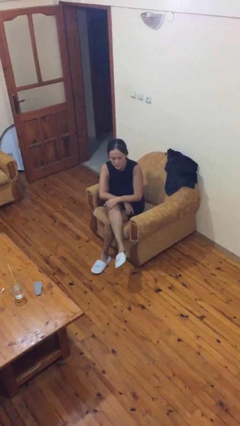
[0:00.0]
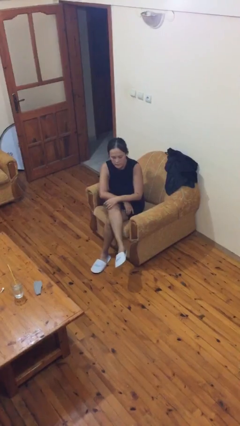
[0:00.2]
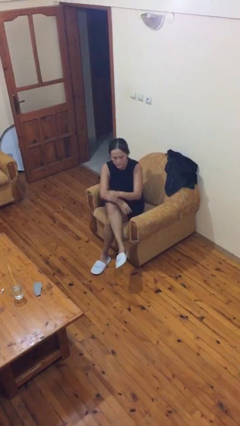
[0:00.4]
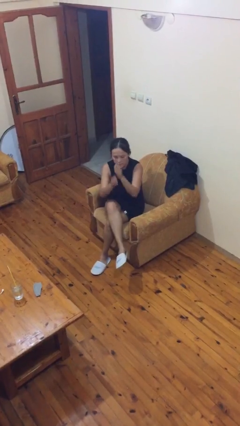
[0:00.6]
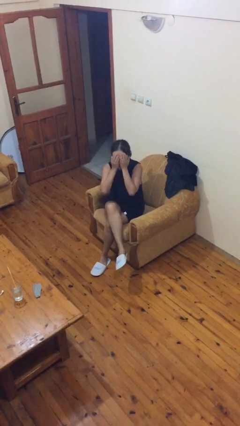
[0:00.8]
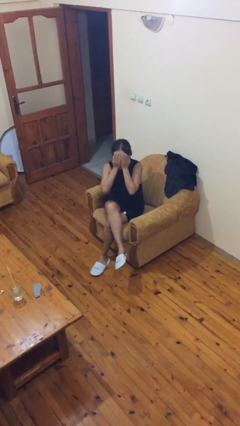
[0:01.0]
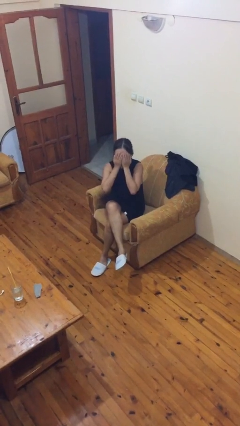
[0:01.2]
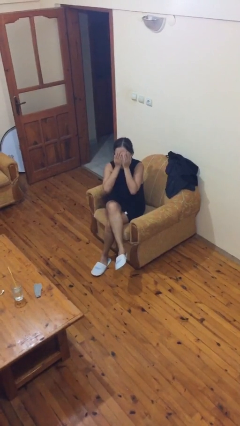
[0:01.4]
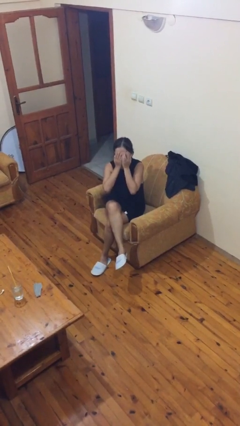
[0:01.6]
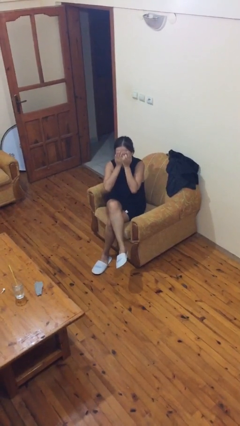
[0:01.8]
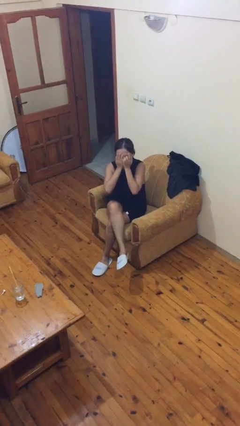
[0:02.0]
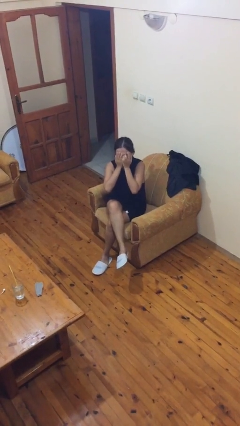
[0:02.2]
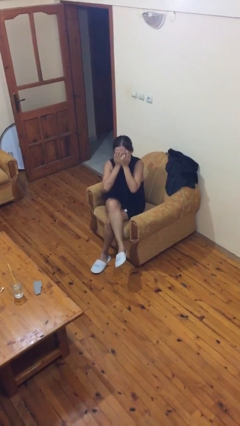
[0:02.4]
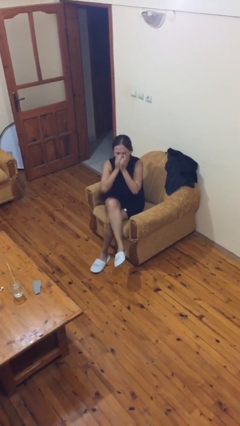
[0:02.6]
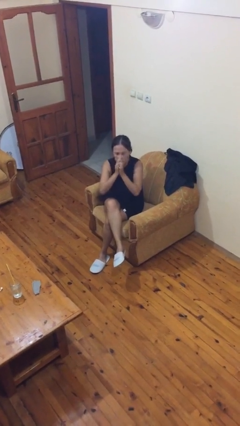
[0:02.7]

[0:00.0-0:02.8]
person covers face with hands

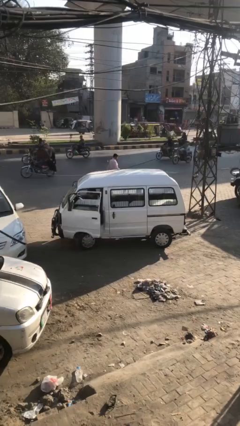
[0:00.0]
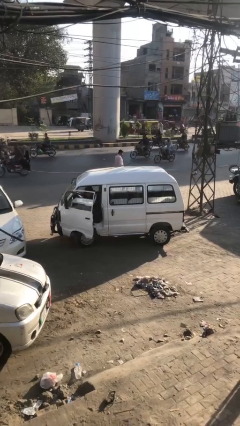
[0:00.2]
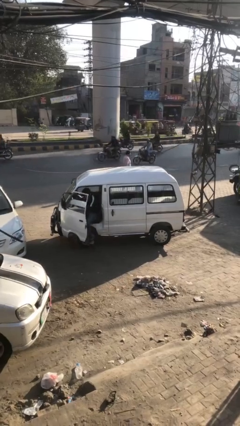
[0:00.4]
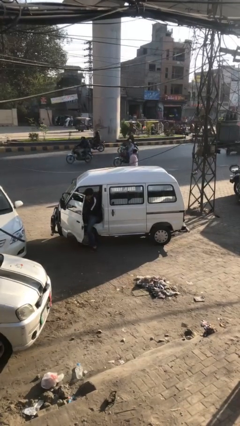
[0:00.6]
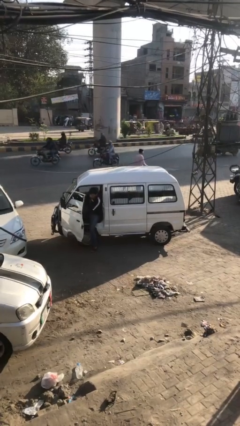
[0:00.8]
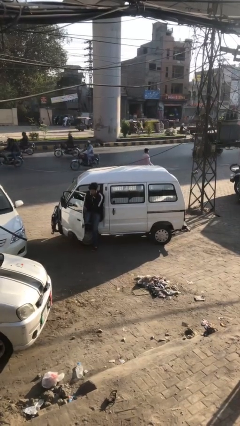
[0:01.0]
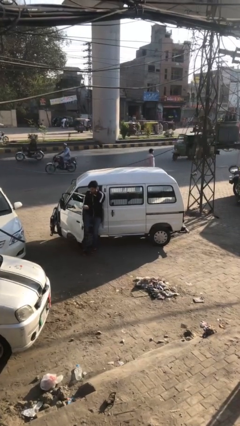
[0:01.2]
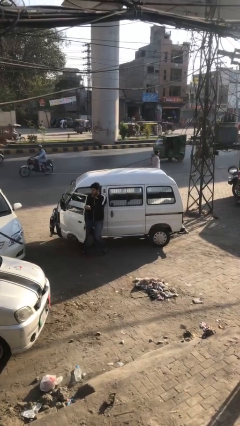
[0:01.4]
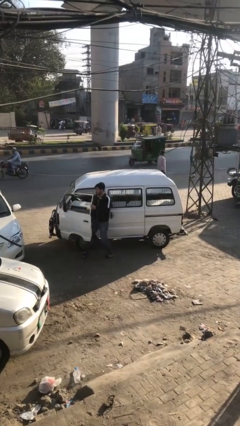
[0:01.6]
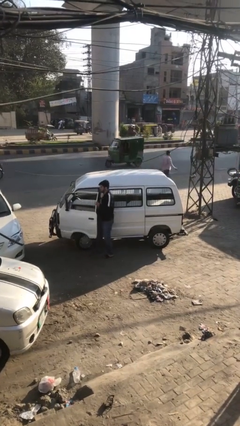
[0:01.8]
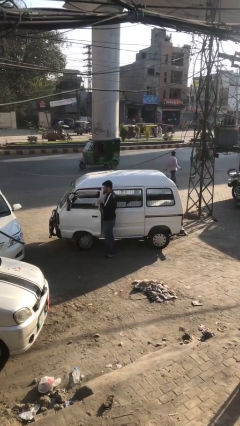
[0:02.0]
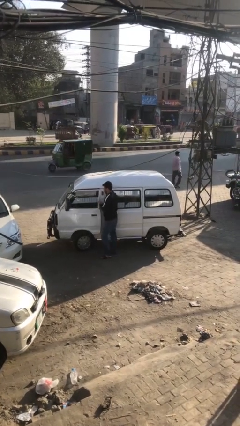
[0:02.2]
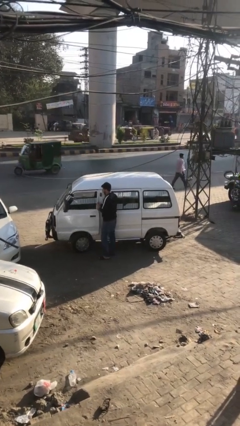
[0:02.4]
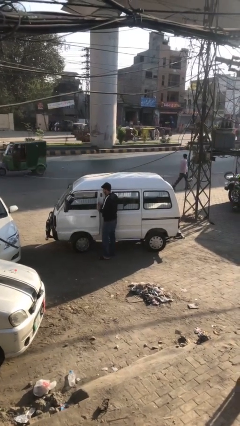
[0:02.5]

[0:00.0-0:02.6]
car drops off person

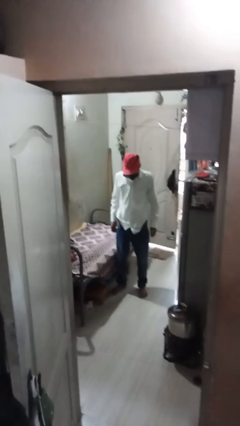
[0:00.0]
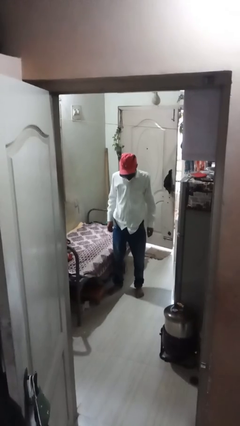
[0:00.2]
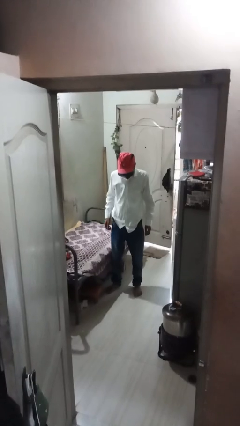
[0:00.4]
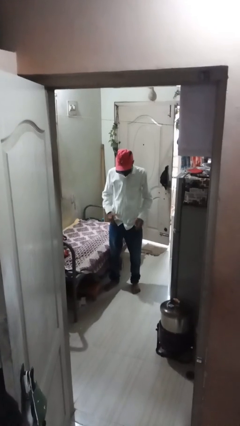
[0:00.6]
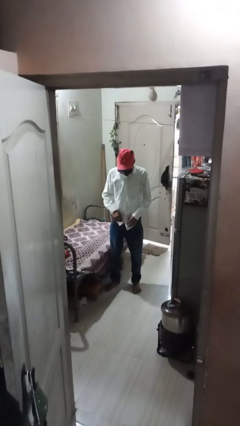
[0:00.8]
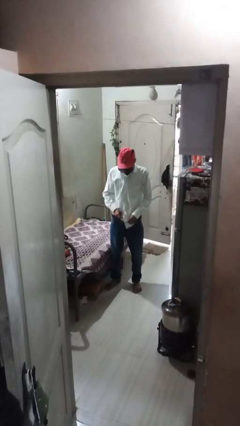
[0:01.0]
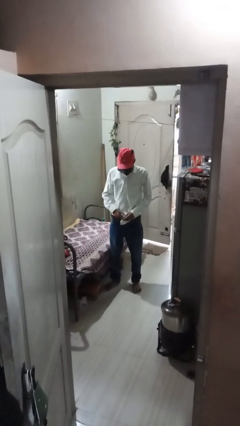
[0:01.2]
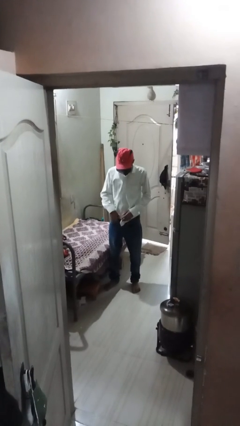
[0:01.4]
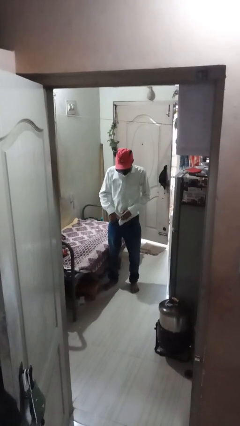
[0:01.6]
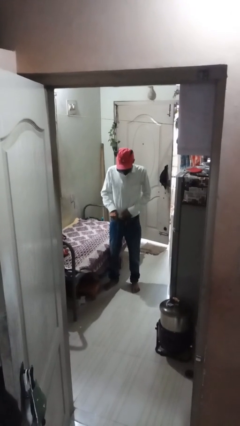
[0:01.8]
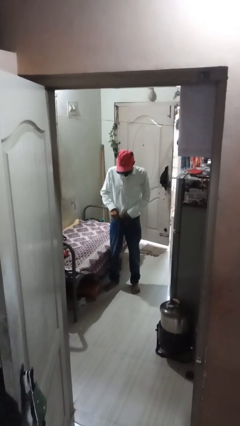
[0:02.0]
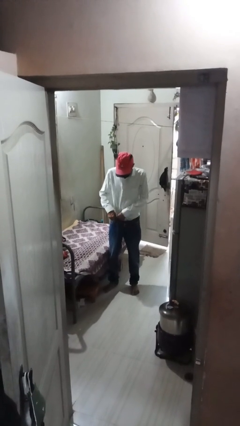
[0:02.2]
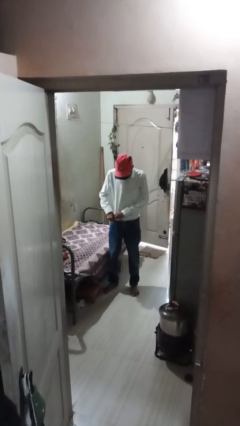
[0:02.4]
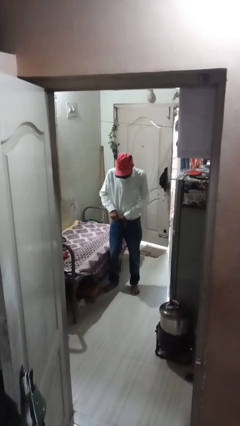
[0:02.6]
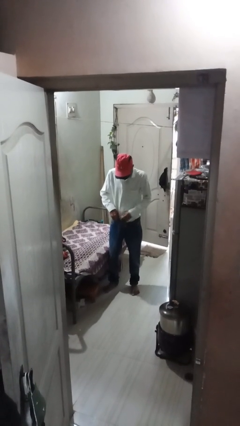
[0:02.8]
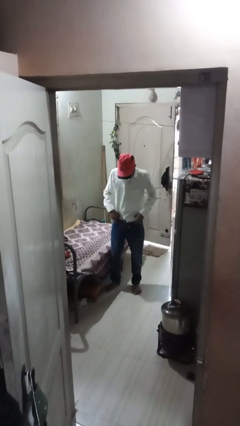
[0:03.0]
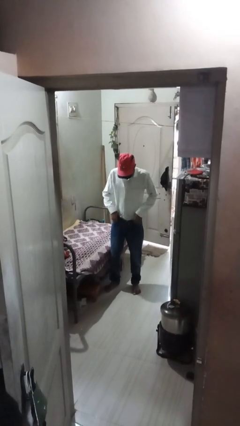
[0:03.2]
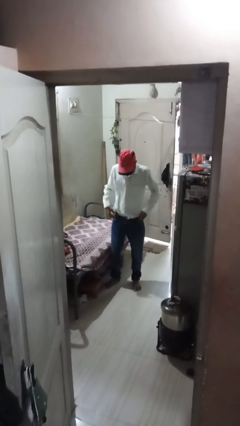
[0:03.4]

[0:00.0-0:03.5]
person tucks in shirt

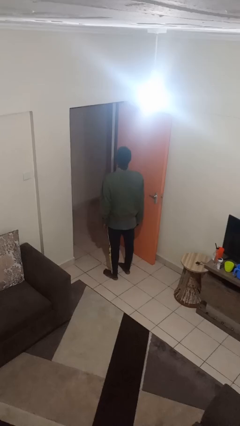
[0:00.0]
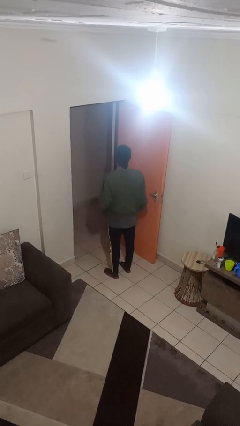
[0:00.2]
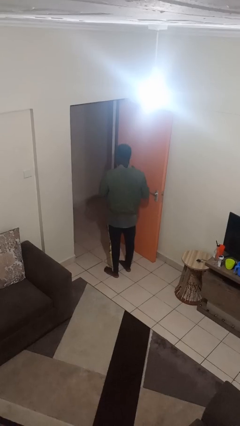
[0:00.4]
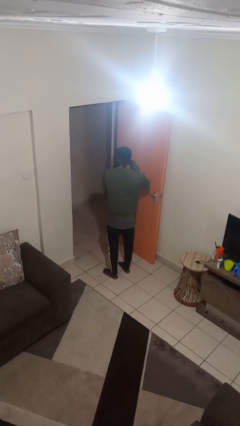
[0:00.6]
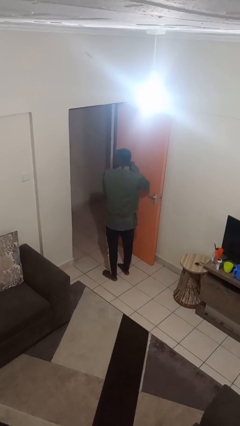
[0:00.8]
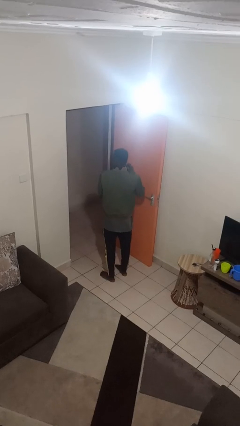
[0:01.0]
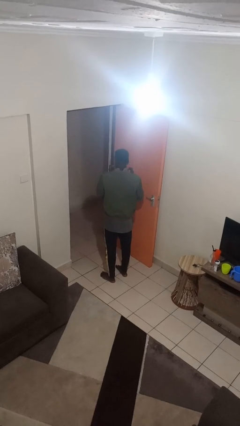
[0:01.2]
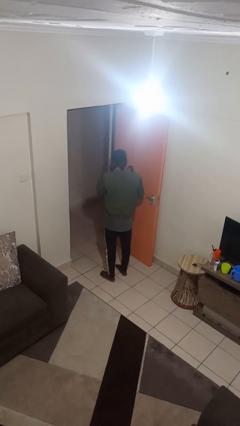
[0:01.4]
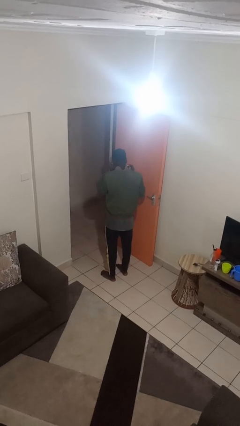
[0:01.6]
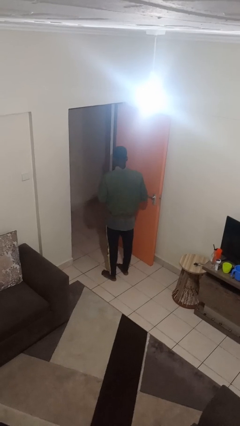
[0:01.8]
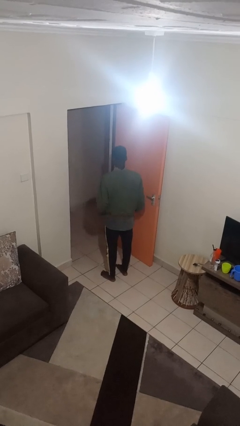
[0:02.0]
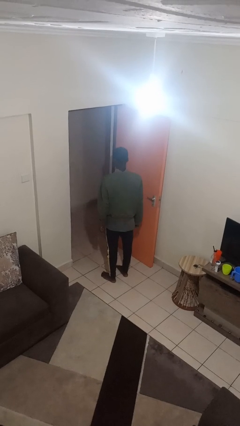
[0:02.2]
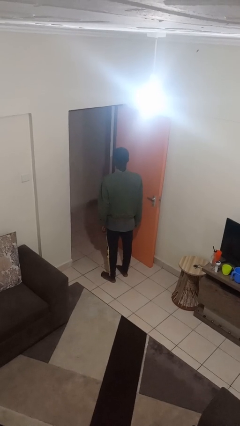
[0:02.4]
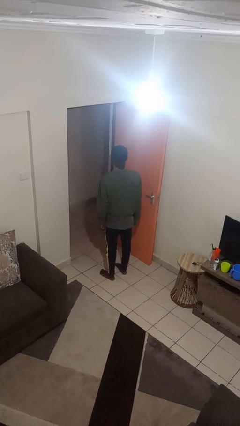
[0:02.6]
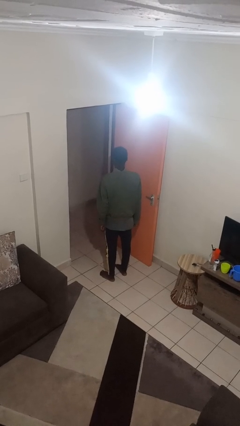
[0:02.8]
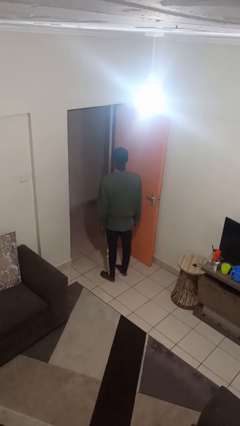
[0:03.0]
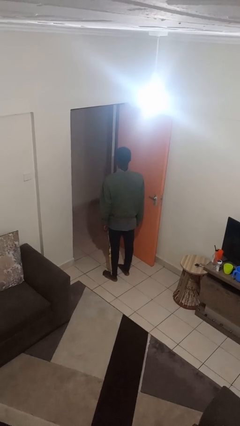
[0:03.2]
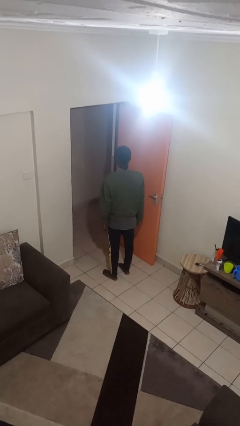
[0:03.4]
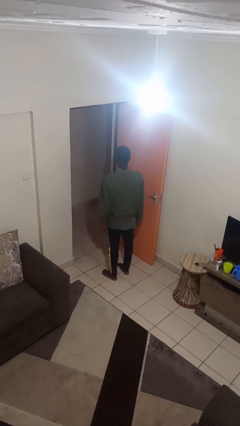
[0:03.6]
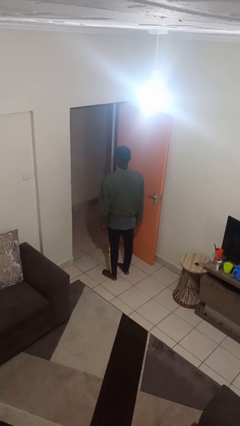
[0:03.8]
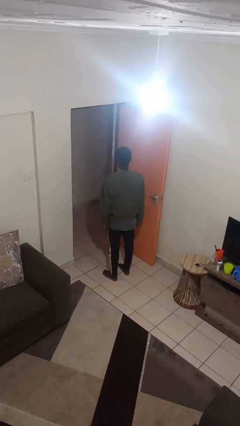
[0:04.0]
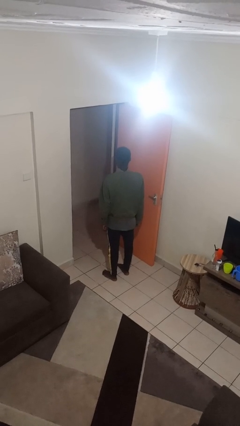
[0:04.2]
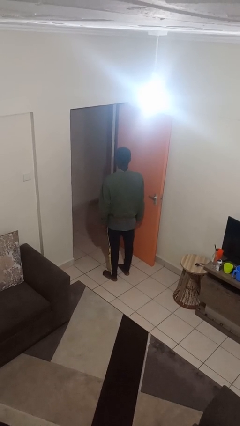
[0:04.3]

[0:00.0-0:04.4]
person puts on earrings

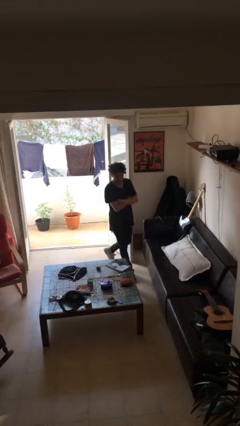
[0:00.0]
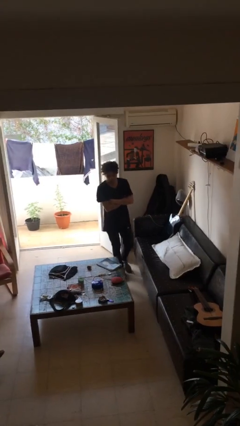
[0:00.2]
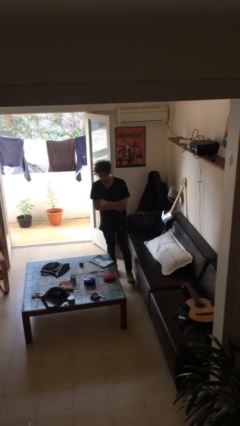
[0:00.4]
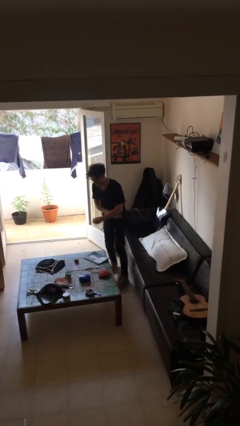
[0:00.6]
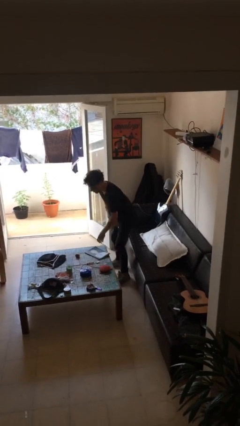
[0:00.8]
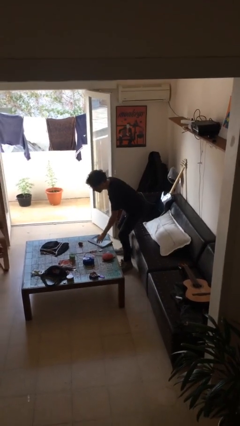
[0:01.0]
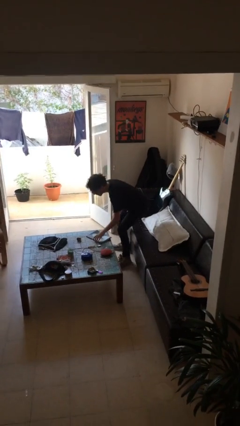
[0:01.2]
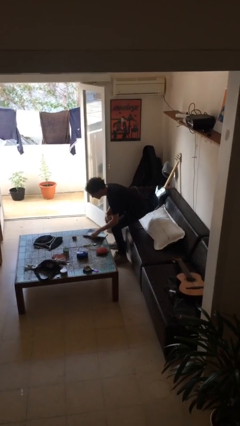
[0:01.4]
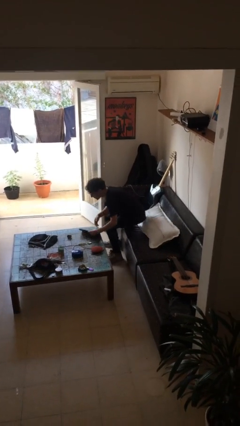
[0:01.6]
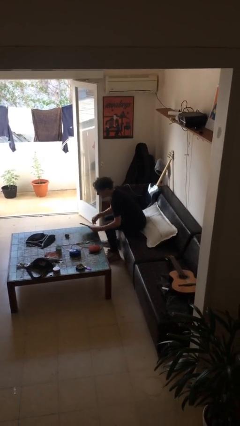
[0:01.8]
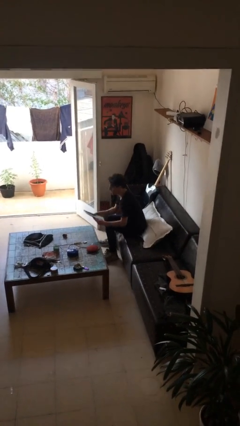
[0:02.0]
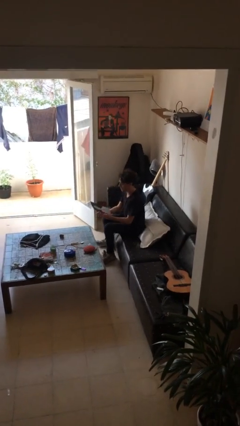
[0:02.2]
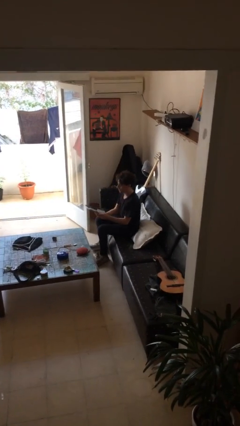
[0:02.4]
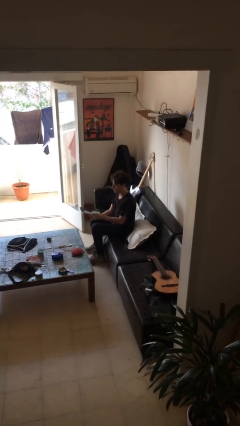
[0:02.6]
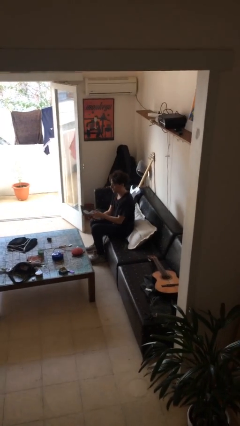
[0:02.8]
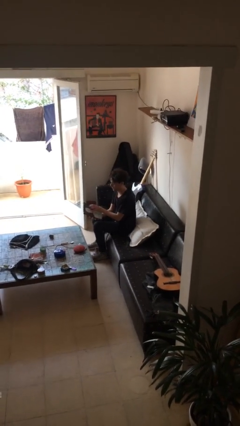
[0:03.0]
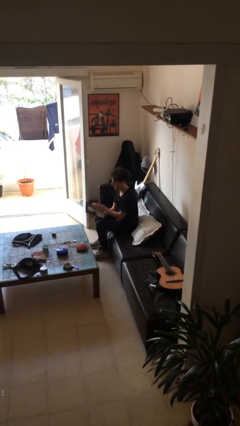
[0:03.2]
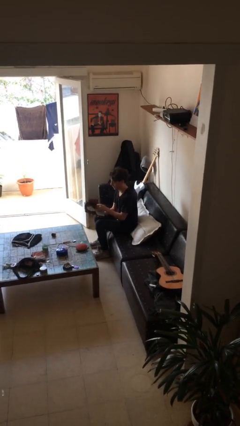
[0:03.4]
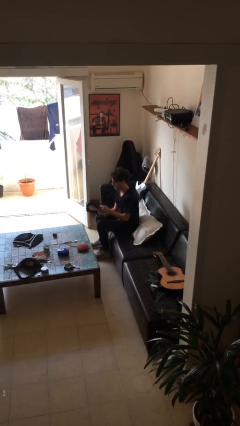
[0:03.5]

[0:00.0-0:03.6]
person sits down

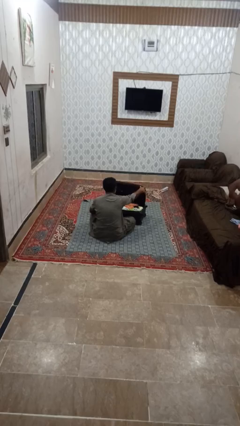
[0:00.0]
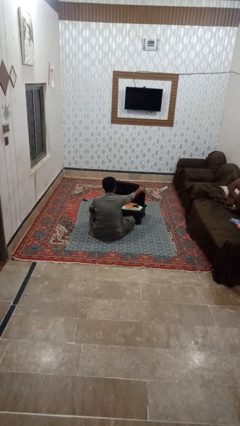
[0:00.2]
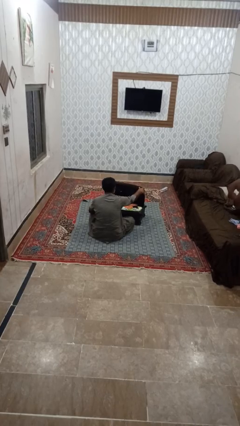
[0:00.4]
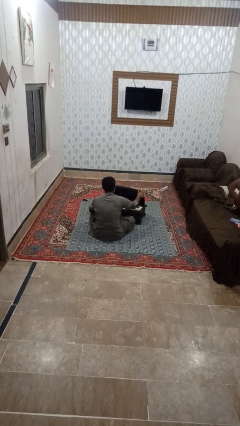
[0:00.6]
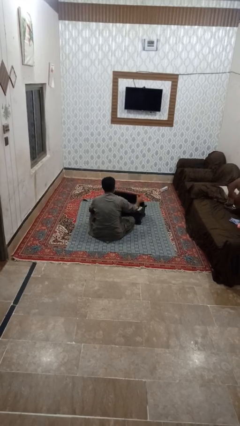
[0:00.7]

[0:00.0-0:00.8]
person closes suitcase
